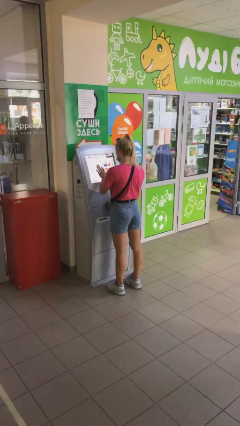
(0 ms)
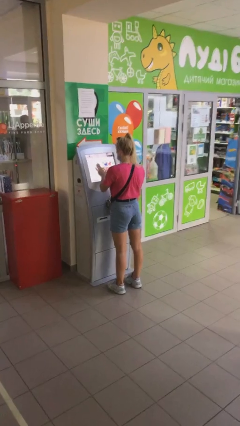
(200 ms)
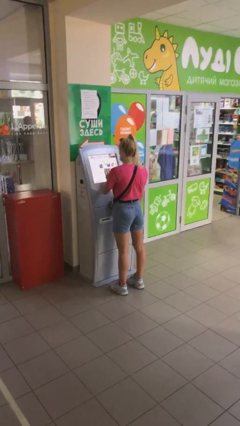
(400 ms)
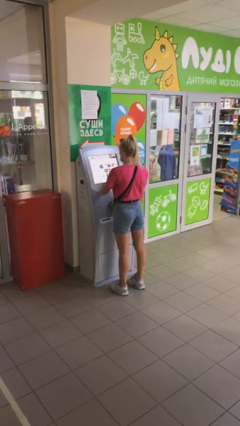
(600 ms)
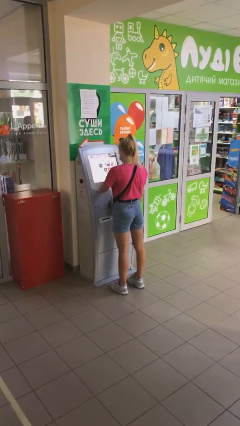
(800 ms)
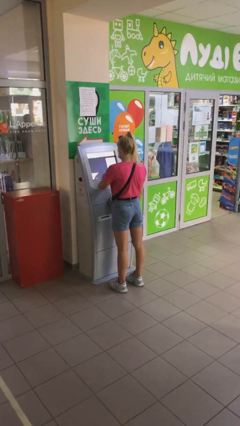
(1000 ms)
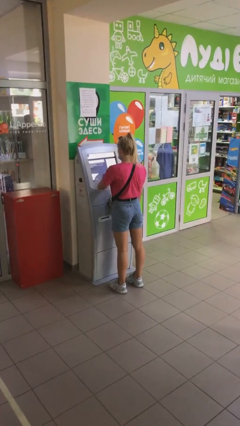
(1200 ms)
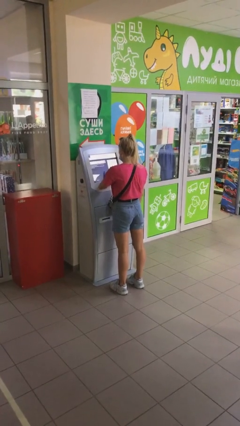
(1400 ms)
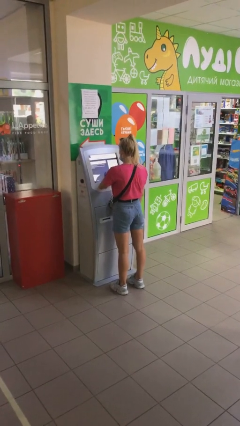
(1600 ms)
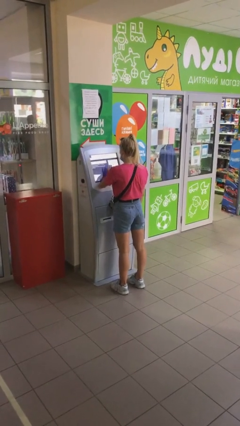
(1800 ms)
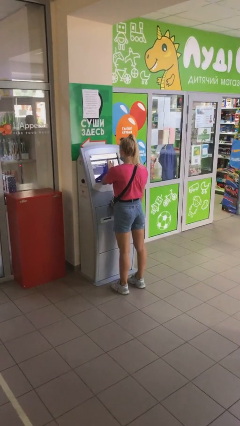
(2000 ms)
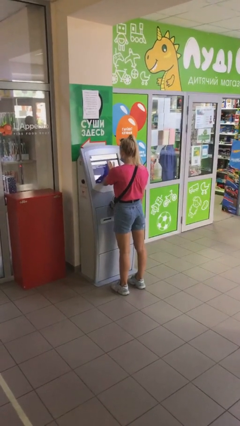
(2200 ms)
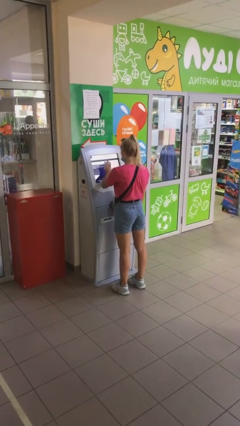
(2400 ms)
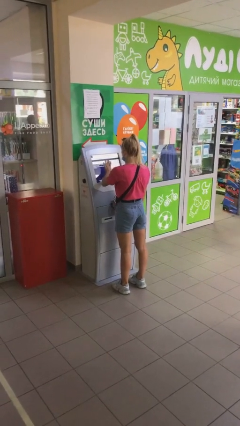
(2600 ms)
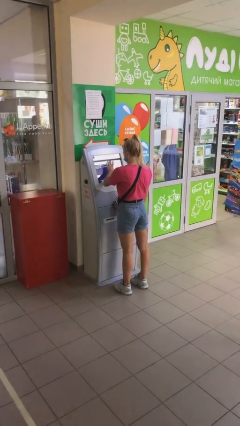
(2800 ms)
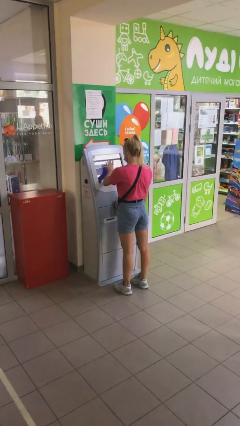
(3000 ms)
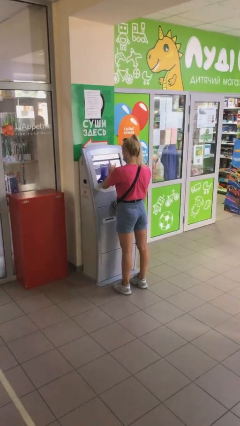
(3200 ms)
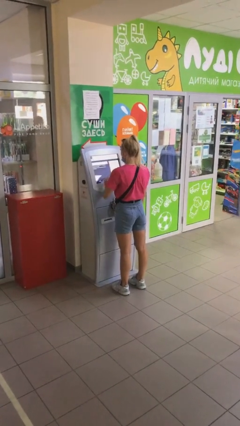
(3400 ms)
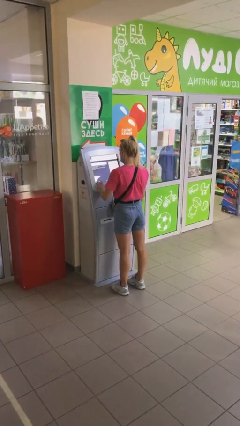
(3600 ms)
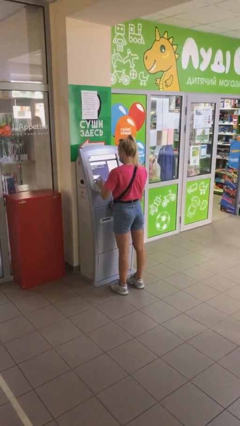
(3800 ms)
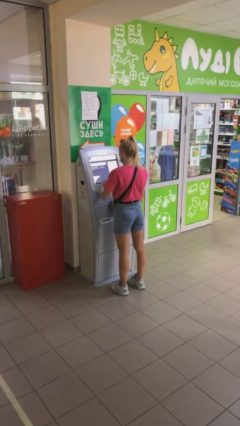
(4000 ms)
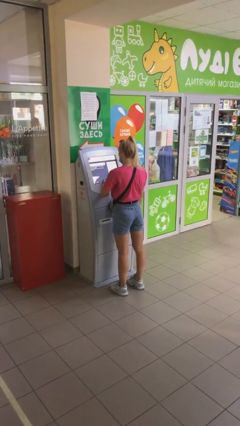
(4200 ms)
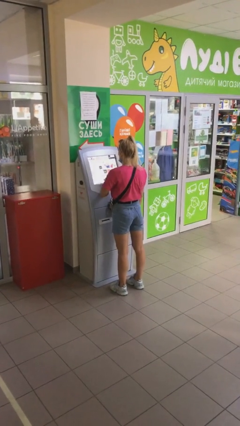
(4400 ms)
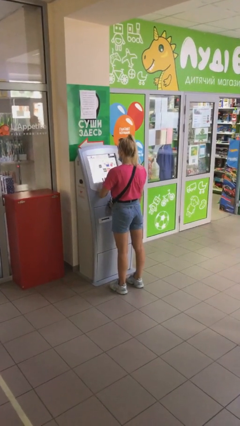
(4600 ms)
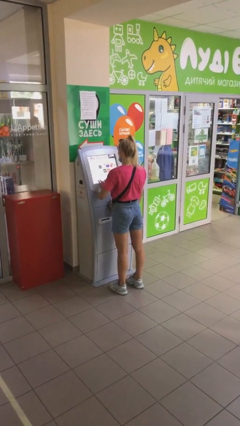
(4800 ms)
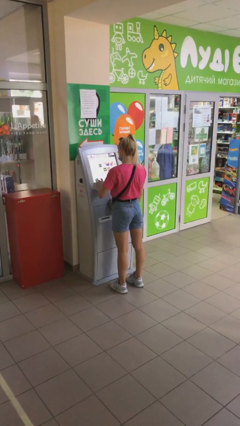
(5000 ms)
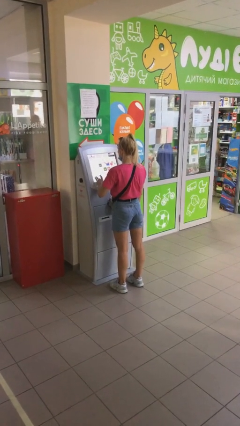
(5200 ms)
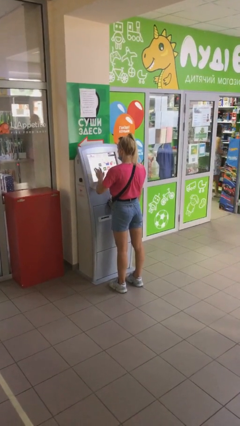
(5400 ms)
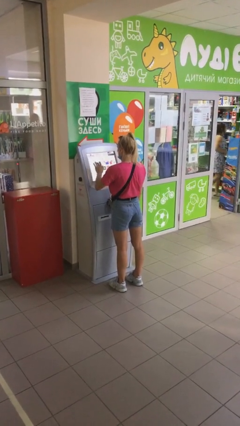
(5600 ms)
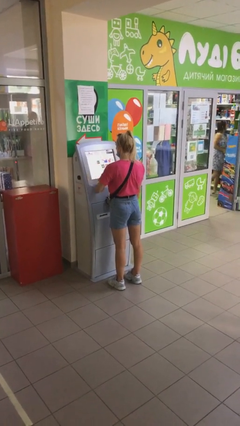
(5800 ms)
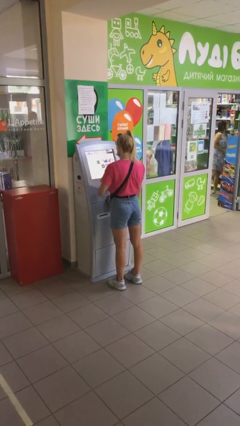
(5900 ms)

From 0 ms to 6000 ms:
person purchases from machine

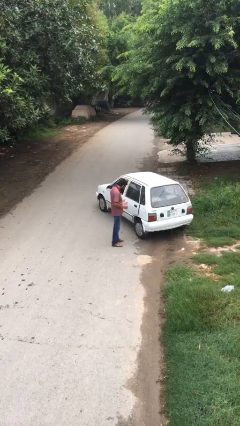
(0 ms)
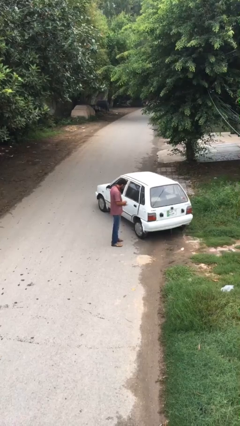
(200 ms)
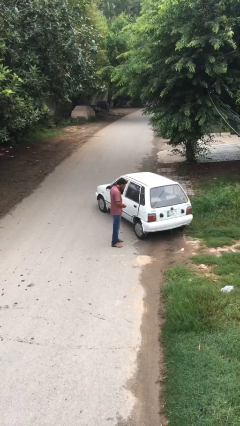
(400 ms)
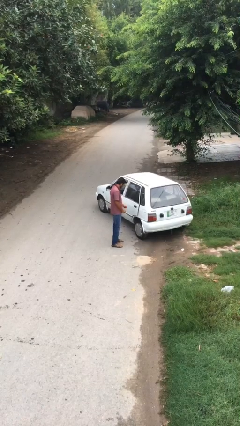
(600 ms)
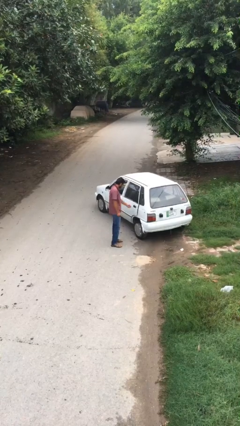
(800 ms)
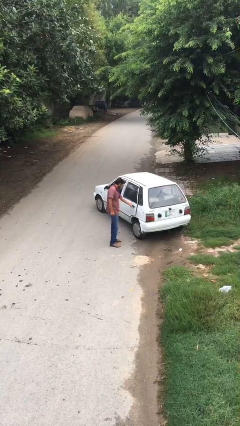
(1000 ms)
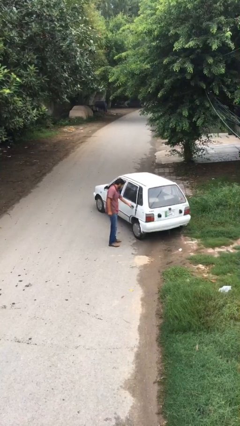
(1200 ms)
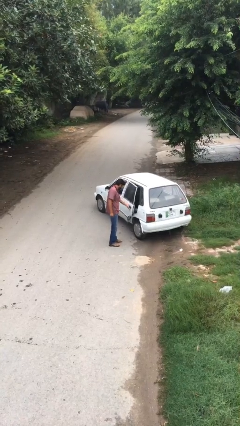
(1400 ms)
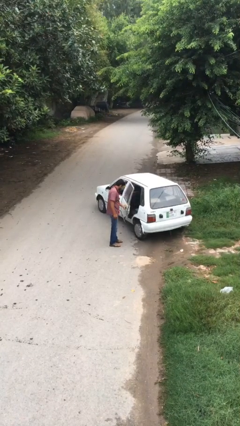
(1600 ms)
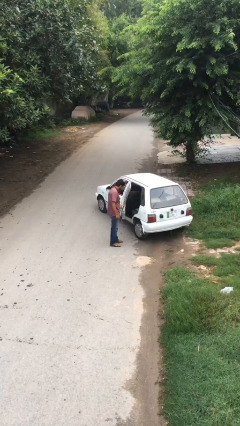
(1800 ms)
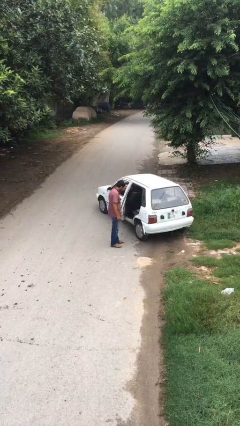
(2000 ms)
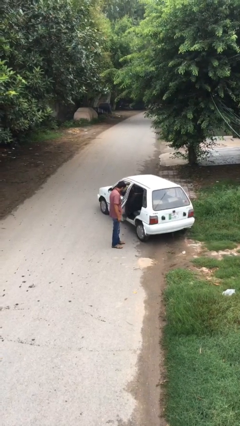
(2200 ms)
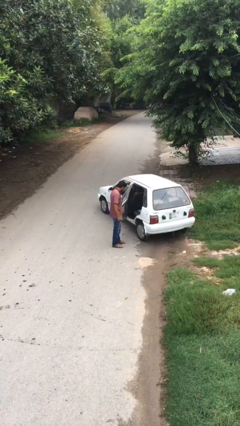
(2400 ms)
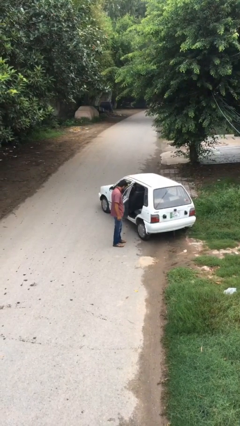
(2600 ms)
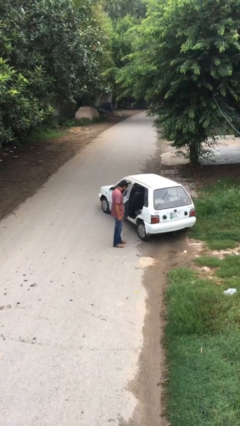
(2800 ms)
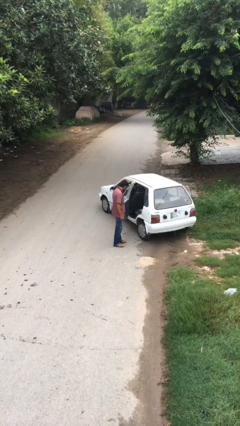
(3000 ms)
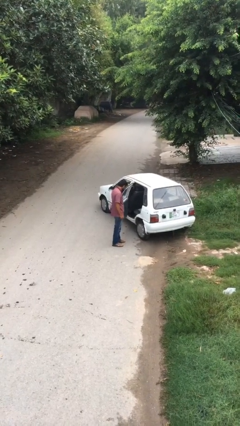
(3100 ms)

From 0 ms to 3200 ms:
person opens car door

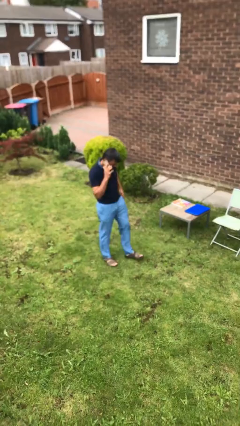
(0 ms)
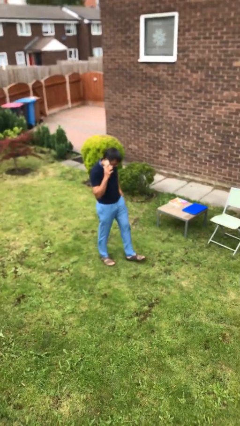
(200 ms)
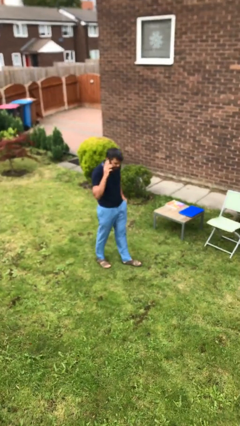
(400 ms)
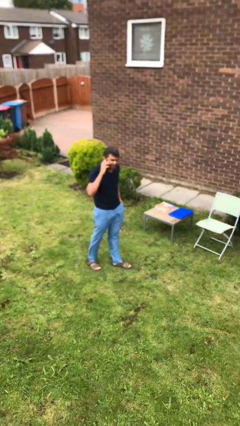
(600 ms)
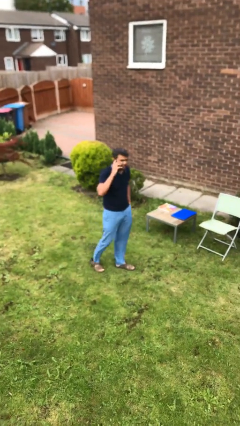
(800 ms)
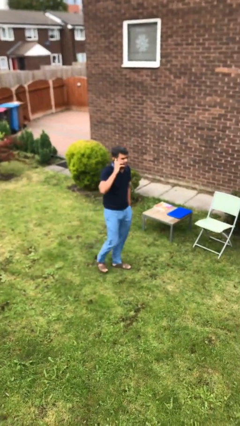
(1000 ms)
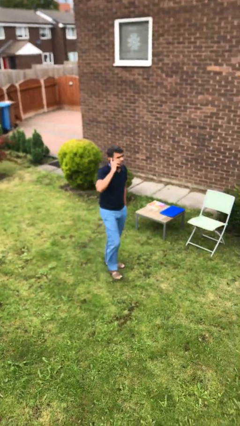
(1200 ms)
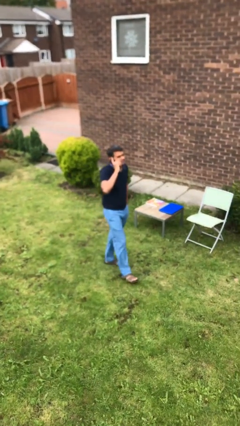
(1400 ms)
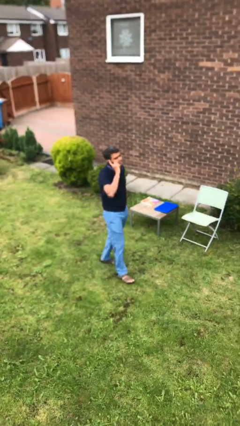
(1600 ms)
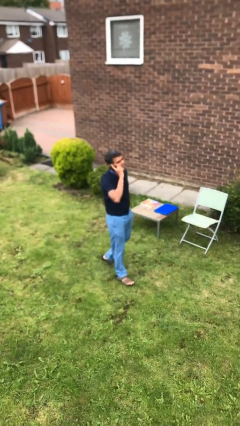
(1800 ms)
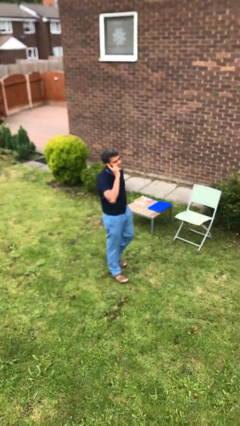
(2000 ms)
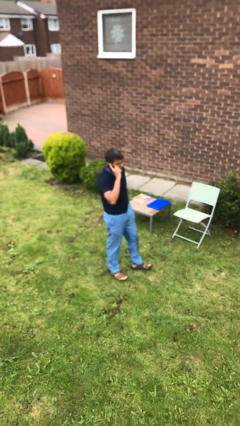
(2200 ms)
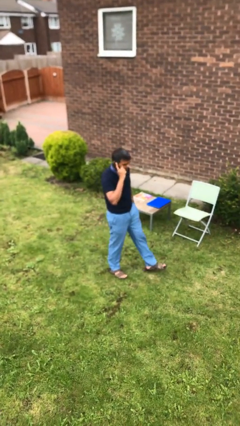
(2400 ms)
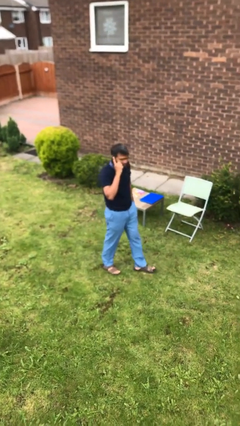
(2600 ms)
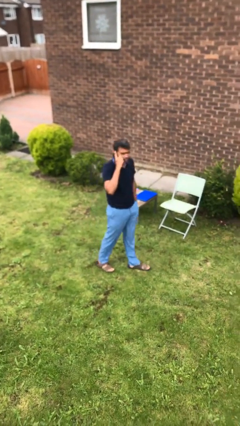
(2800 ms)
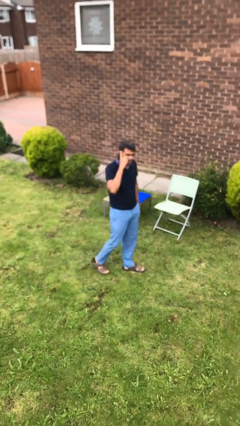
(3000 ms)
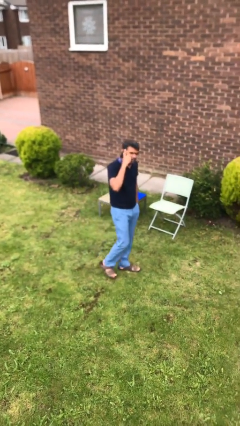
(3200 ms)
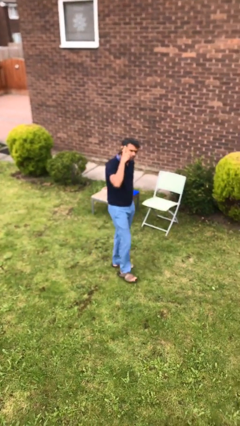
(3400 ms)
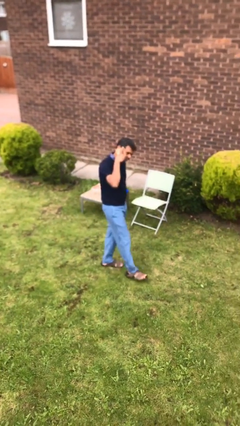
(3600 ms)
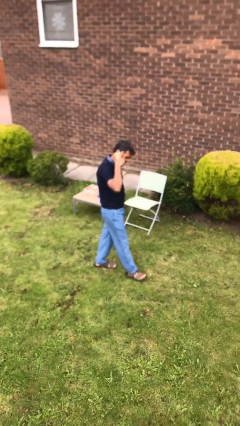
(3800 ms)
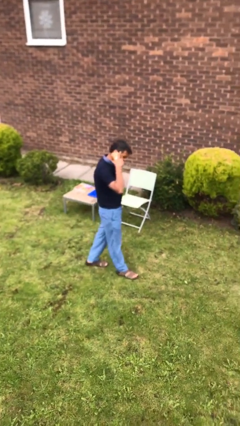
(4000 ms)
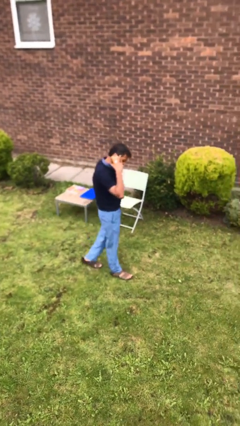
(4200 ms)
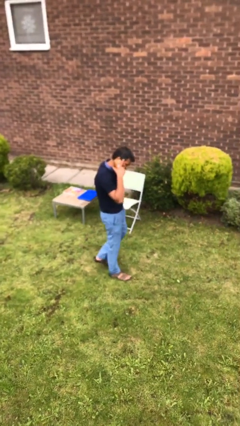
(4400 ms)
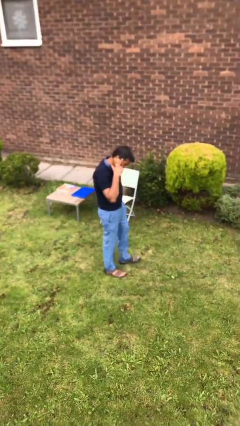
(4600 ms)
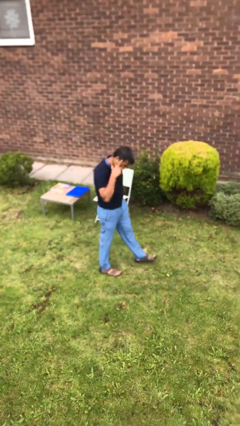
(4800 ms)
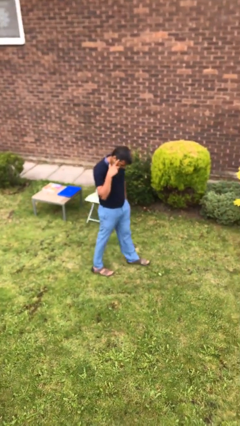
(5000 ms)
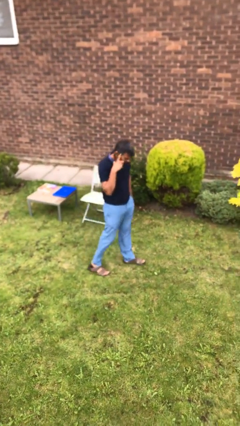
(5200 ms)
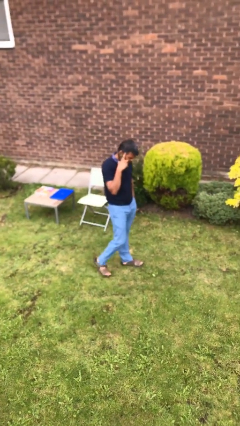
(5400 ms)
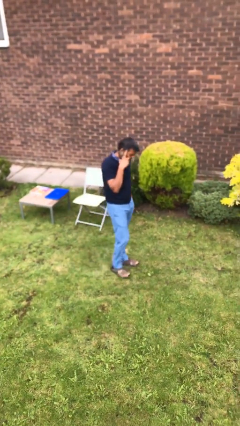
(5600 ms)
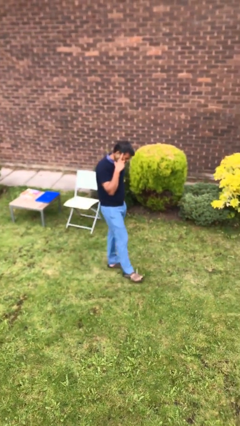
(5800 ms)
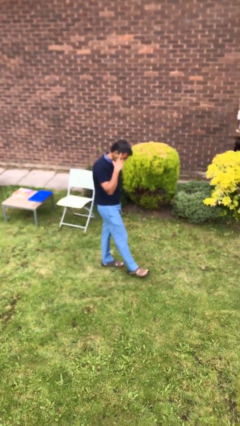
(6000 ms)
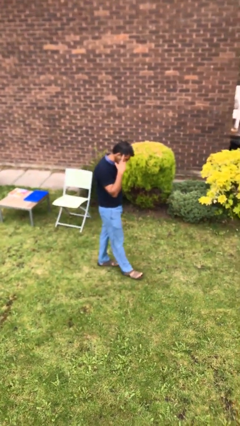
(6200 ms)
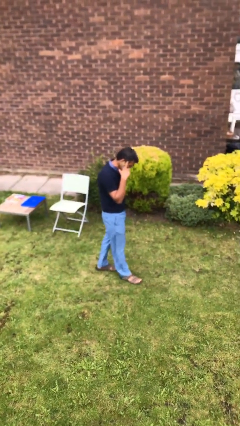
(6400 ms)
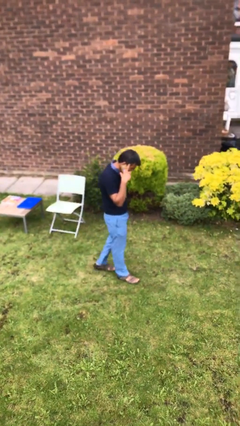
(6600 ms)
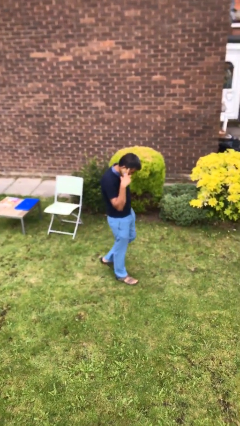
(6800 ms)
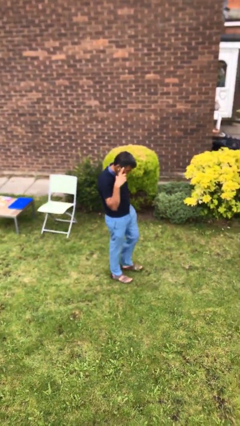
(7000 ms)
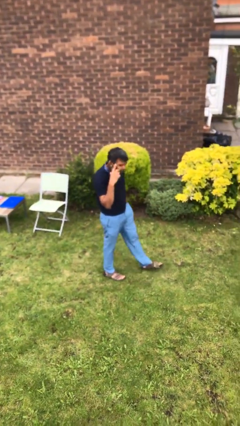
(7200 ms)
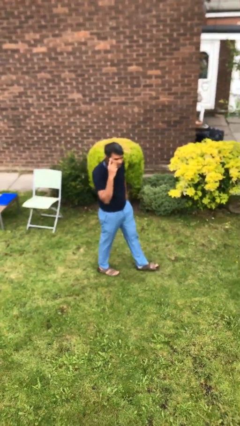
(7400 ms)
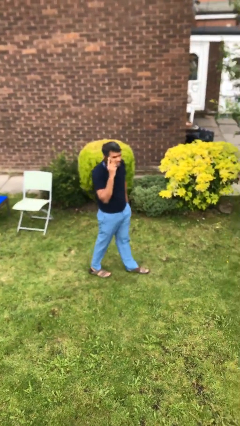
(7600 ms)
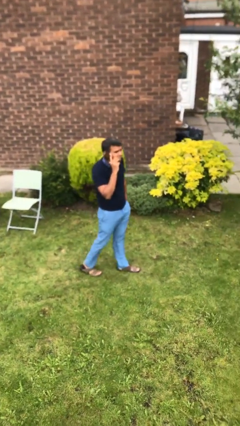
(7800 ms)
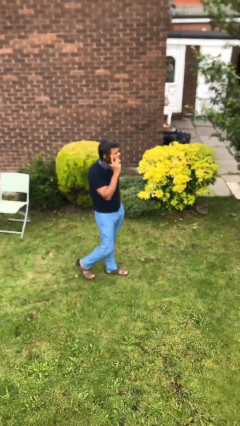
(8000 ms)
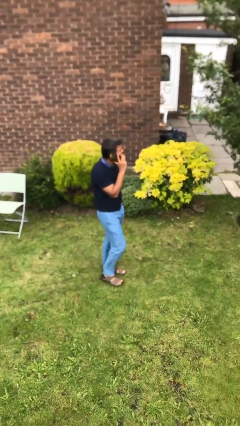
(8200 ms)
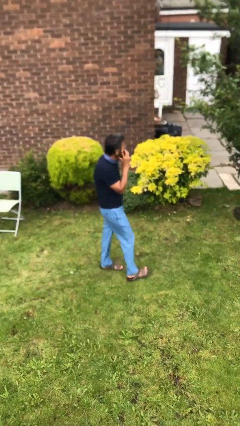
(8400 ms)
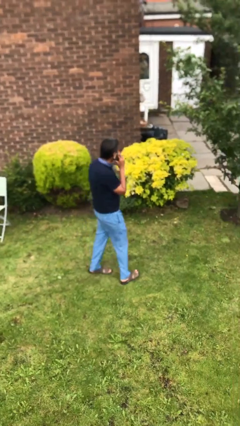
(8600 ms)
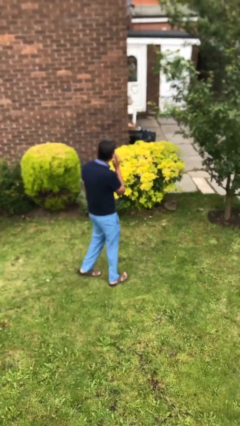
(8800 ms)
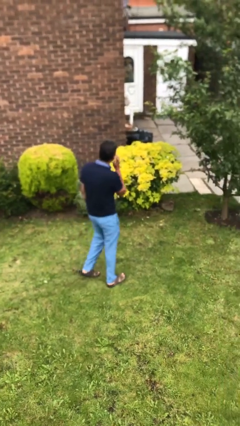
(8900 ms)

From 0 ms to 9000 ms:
person talks on phone
